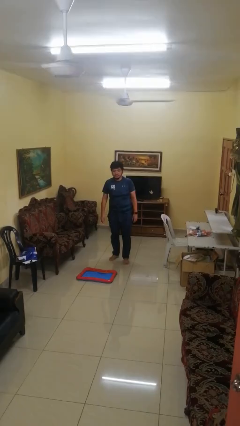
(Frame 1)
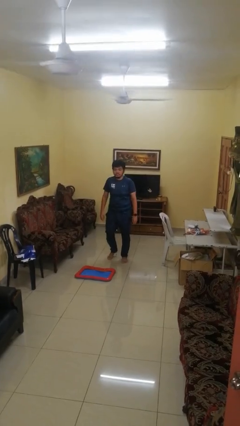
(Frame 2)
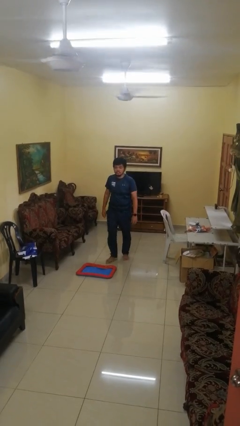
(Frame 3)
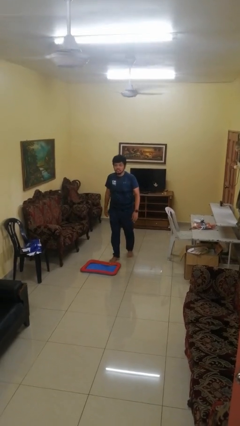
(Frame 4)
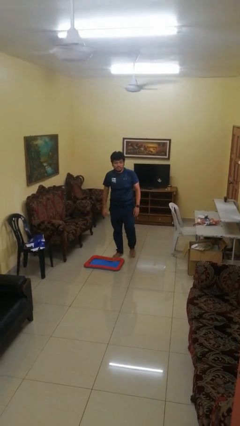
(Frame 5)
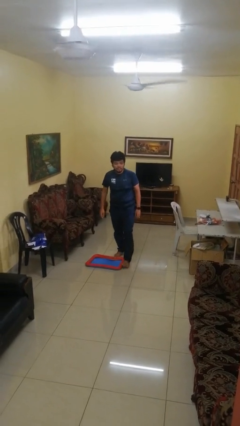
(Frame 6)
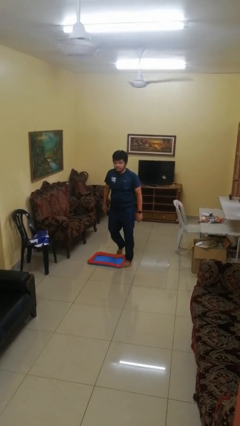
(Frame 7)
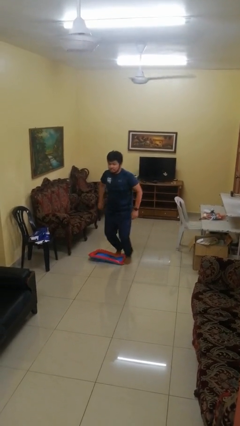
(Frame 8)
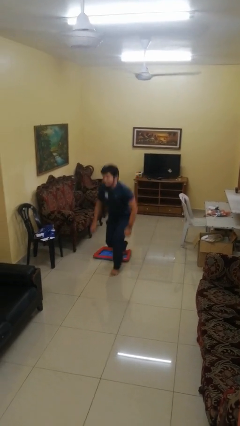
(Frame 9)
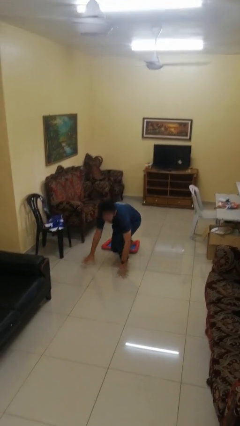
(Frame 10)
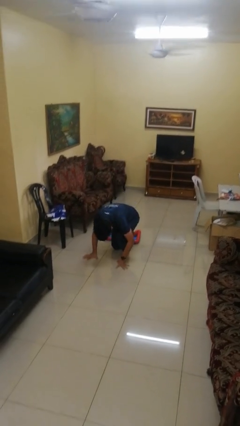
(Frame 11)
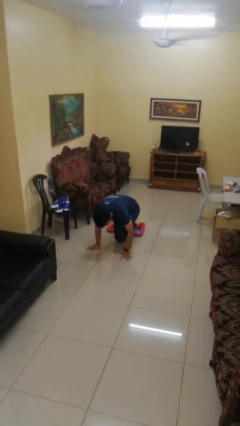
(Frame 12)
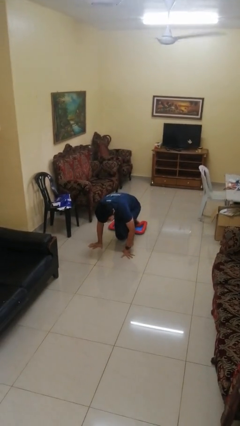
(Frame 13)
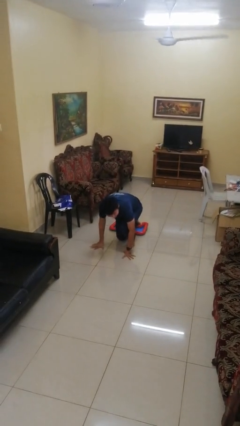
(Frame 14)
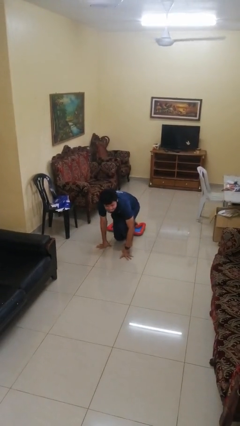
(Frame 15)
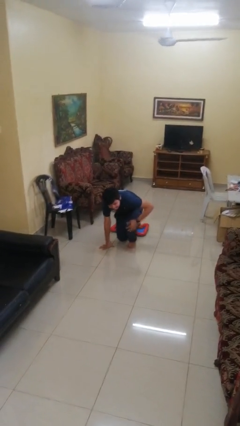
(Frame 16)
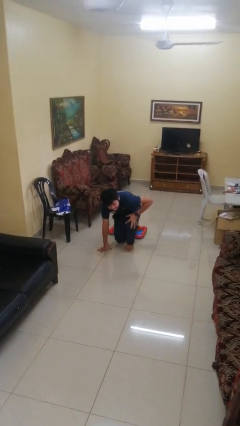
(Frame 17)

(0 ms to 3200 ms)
person trips on object on floor

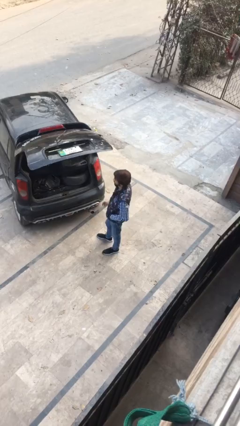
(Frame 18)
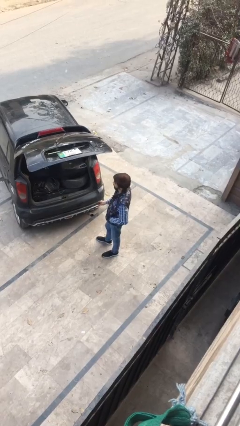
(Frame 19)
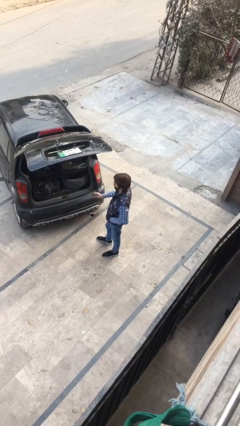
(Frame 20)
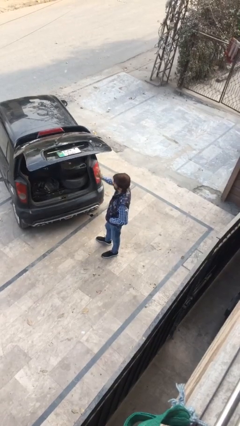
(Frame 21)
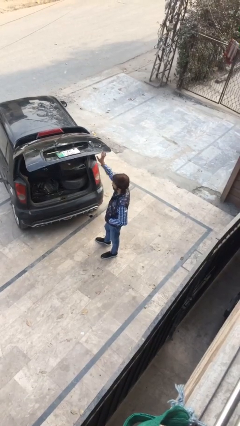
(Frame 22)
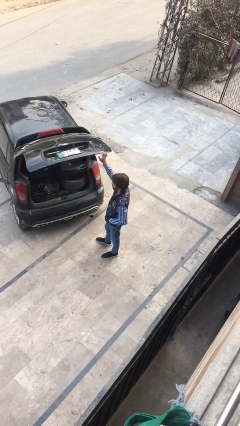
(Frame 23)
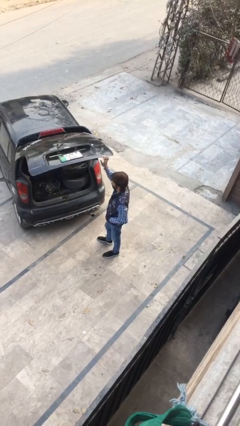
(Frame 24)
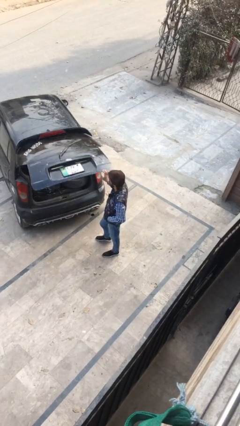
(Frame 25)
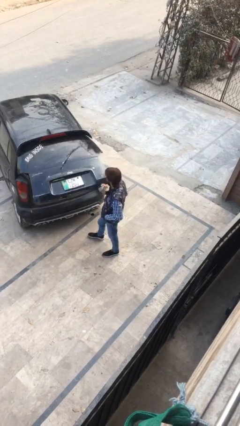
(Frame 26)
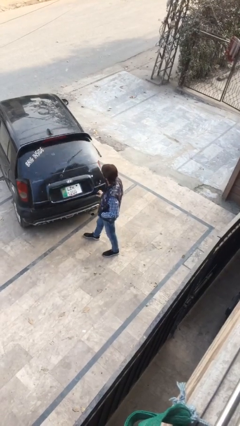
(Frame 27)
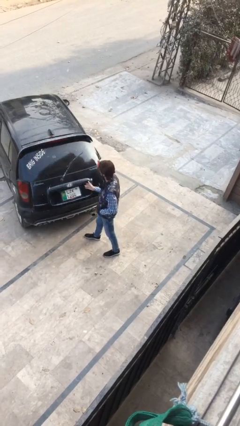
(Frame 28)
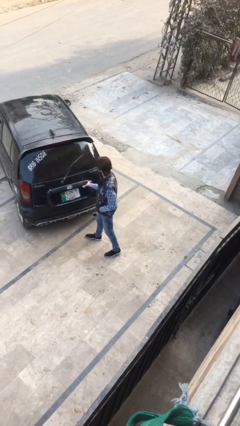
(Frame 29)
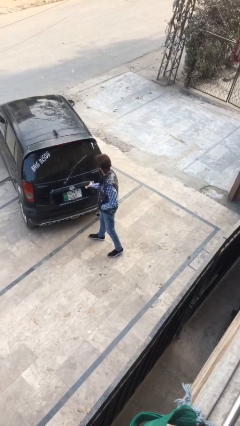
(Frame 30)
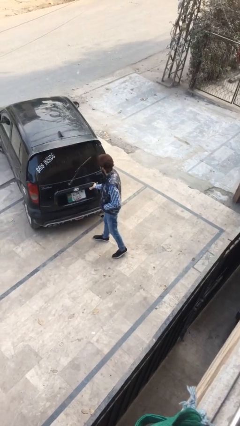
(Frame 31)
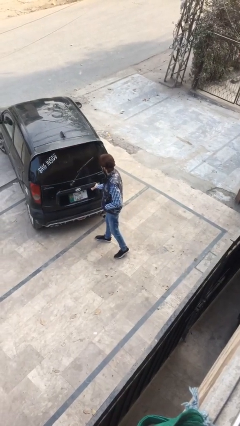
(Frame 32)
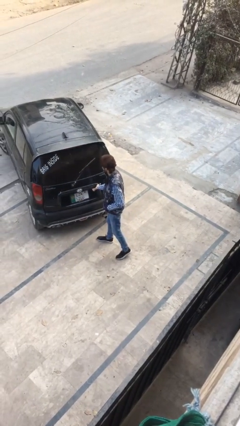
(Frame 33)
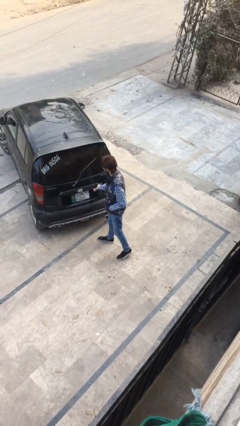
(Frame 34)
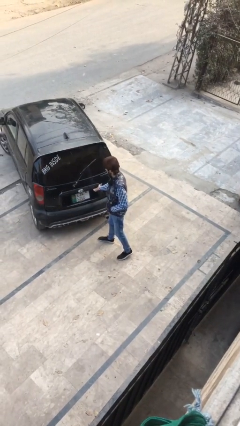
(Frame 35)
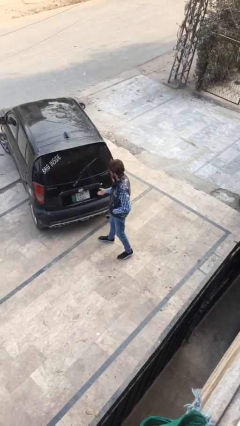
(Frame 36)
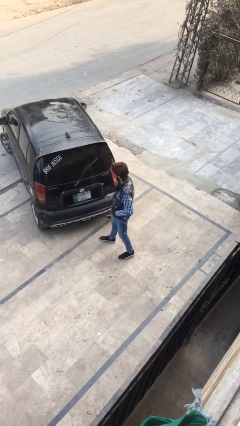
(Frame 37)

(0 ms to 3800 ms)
person closes car trunk

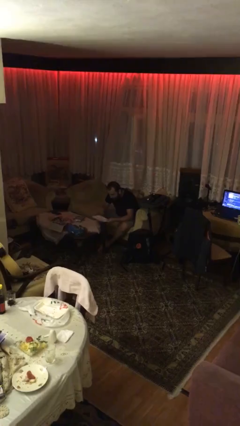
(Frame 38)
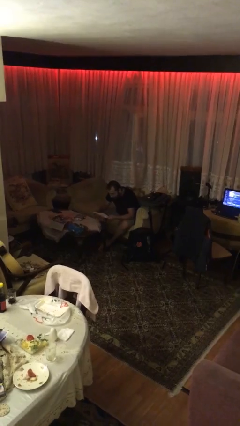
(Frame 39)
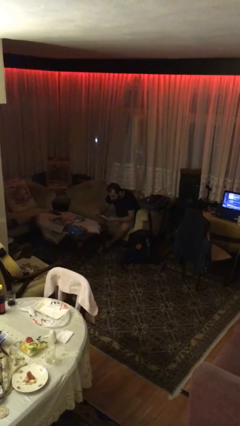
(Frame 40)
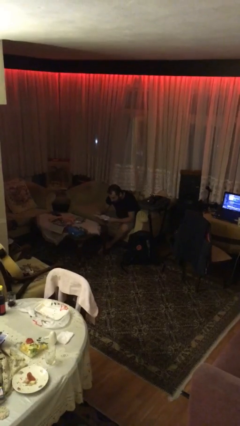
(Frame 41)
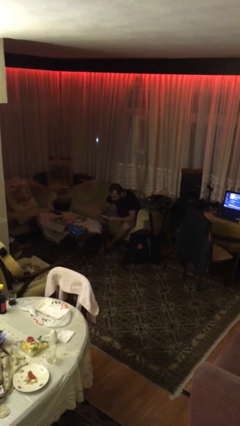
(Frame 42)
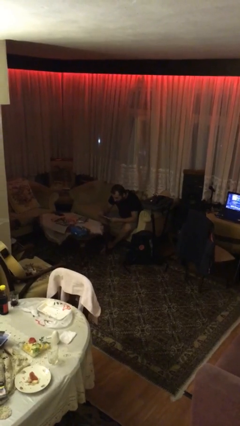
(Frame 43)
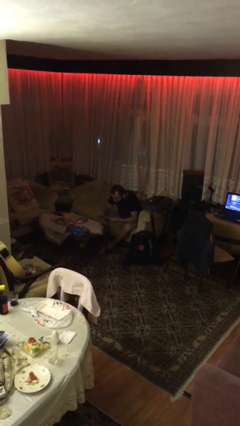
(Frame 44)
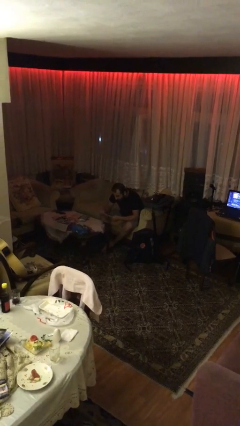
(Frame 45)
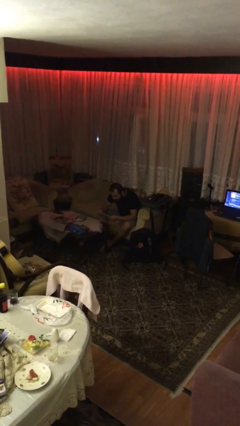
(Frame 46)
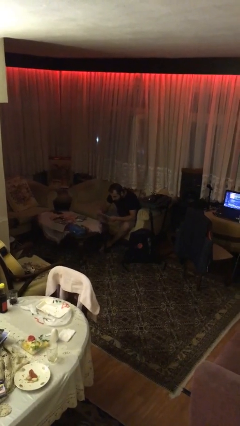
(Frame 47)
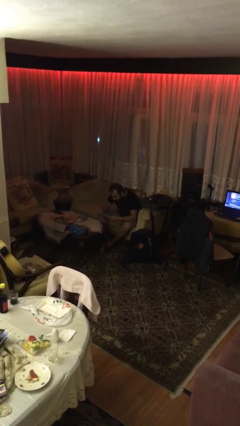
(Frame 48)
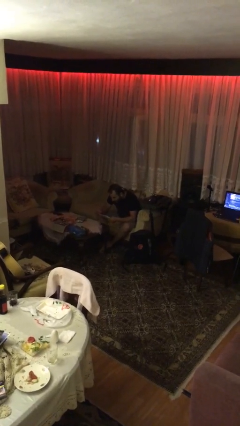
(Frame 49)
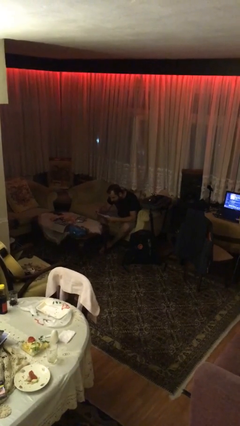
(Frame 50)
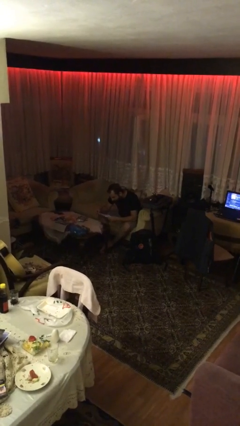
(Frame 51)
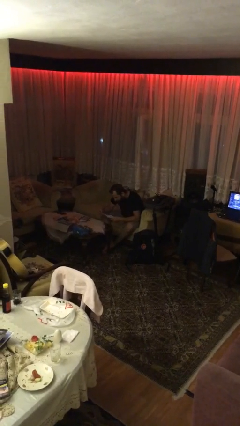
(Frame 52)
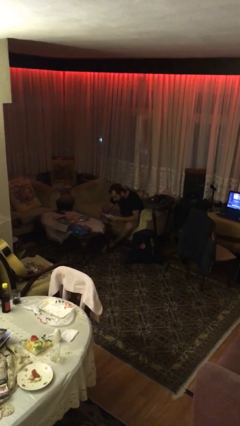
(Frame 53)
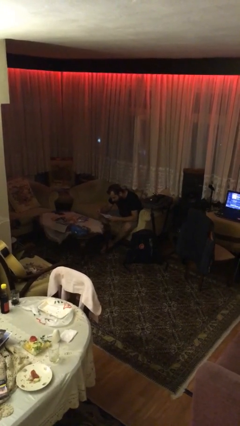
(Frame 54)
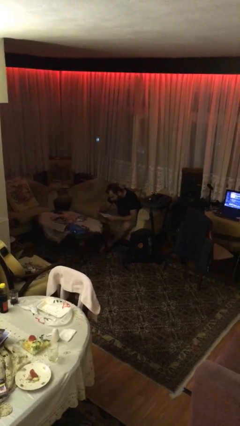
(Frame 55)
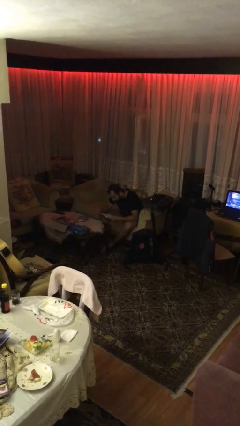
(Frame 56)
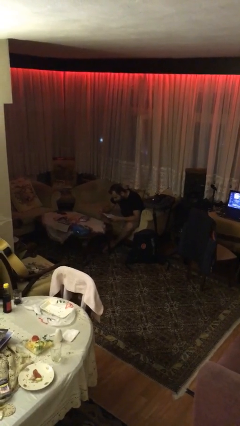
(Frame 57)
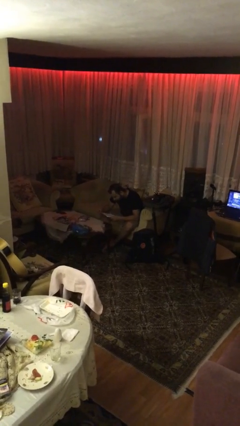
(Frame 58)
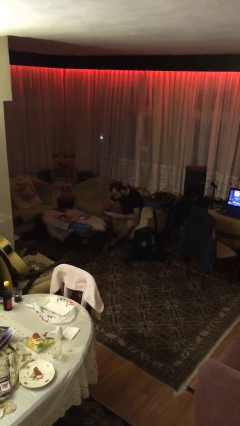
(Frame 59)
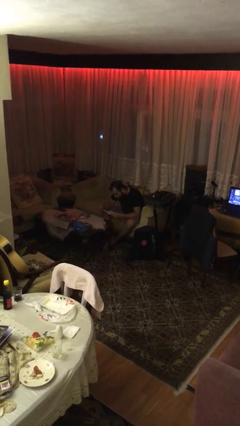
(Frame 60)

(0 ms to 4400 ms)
person reads document

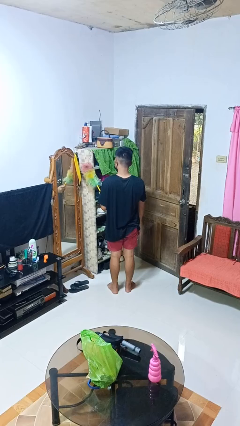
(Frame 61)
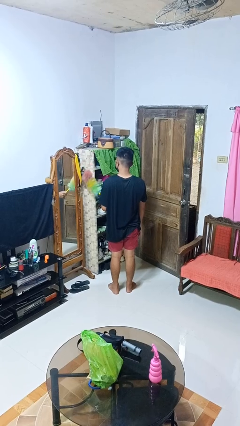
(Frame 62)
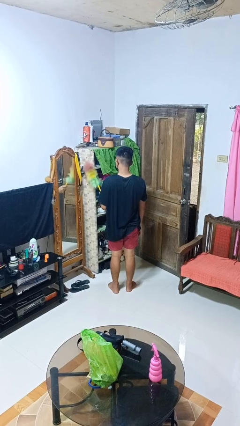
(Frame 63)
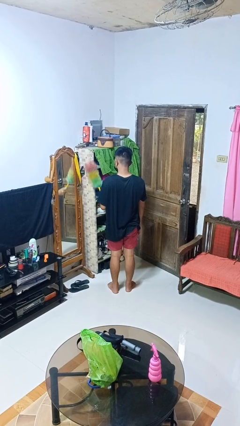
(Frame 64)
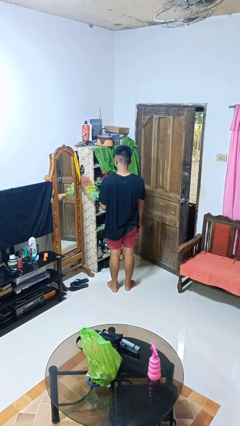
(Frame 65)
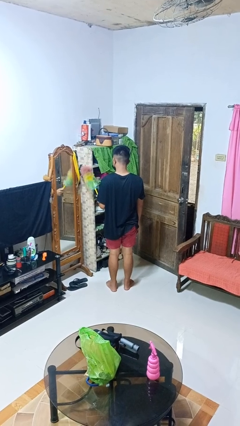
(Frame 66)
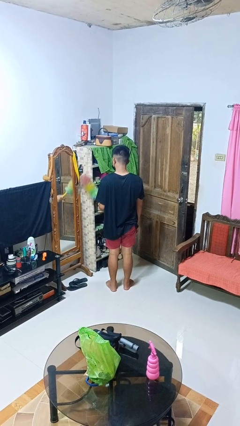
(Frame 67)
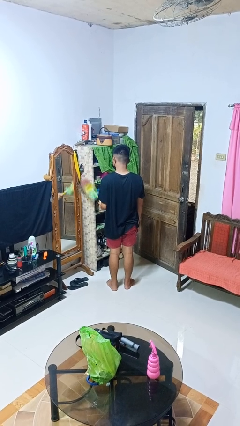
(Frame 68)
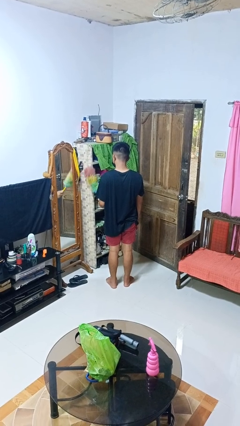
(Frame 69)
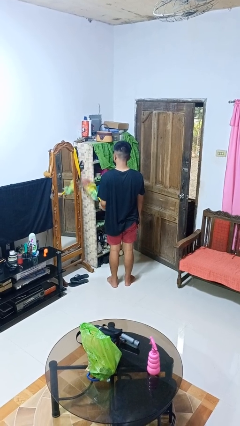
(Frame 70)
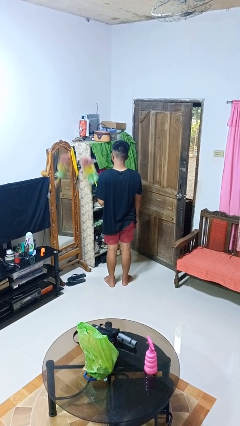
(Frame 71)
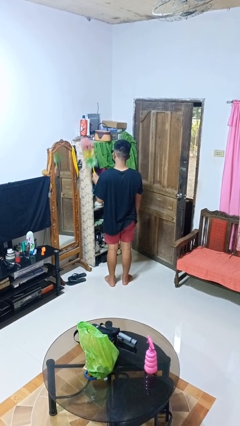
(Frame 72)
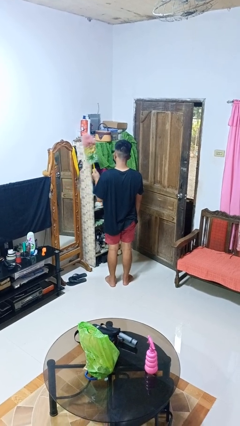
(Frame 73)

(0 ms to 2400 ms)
person dusts furniture

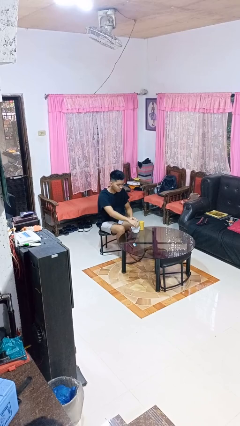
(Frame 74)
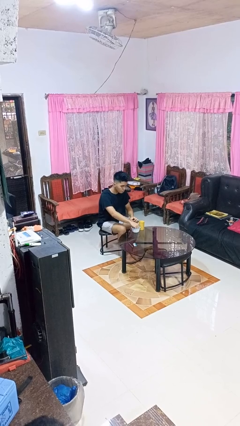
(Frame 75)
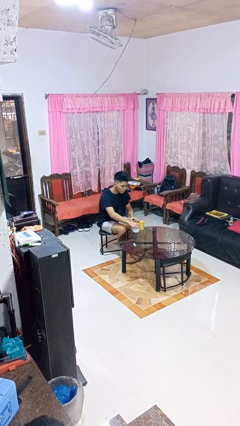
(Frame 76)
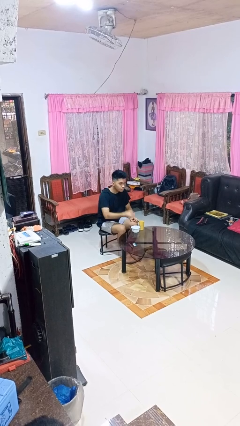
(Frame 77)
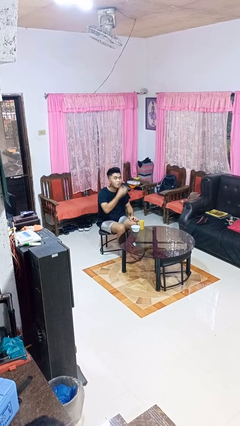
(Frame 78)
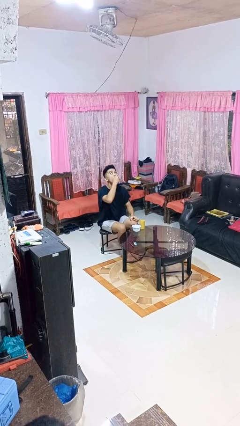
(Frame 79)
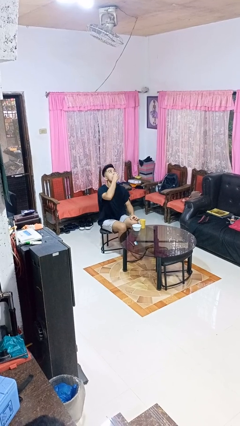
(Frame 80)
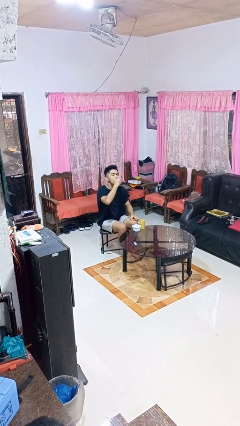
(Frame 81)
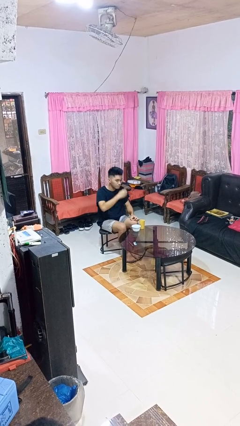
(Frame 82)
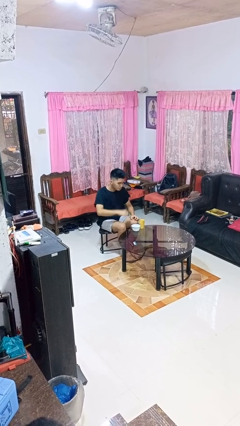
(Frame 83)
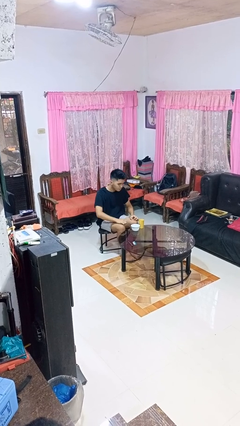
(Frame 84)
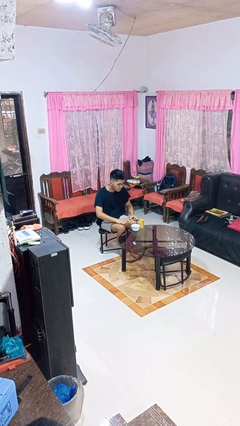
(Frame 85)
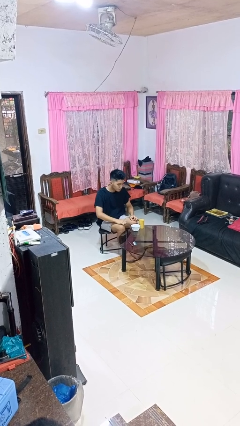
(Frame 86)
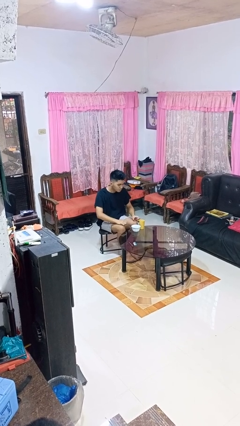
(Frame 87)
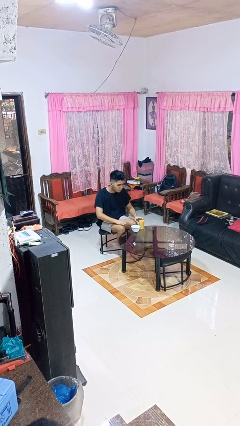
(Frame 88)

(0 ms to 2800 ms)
person takes medicine pills

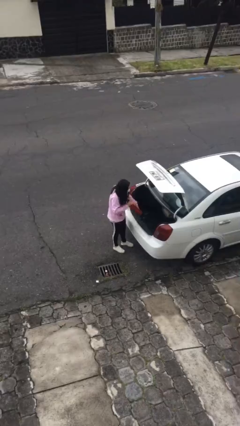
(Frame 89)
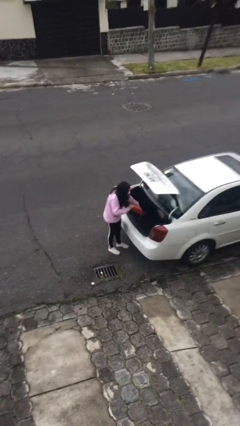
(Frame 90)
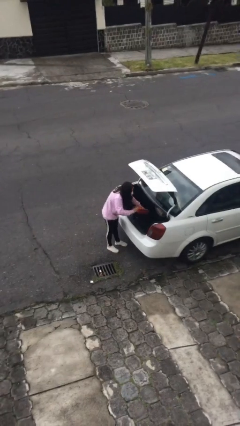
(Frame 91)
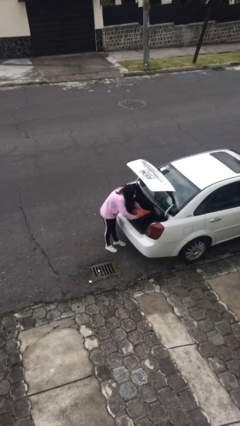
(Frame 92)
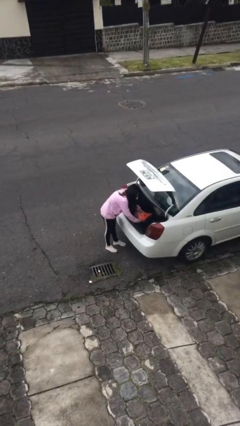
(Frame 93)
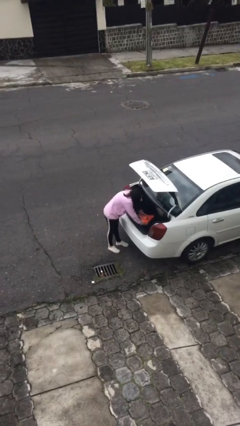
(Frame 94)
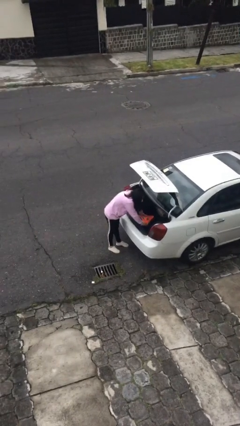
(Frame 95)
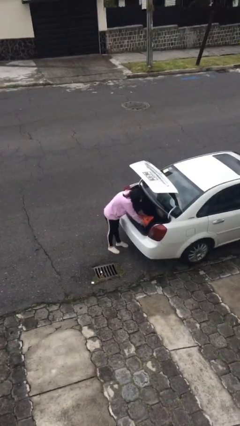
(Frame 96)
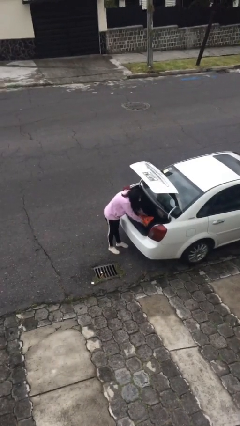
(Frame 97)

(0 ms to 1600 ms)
person loads car
